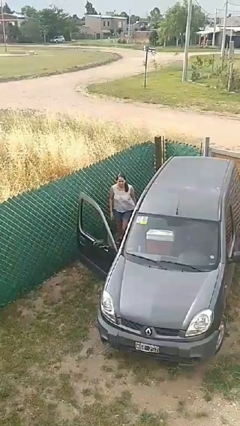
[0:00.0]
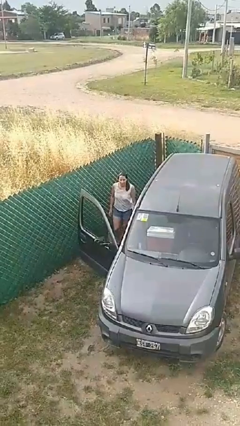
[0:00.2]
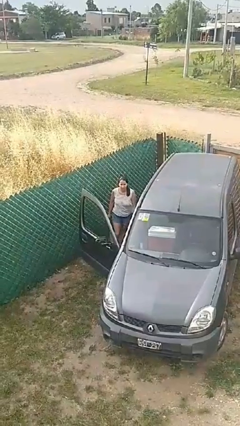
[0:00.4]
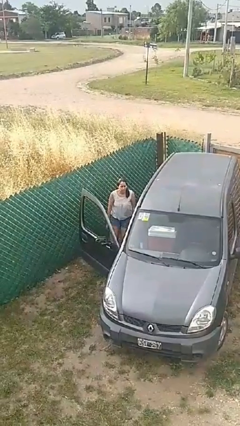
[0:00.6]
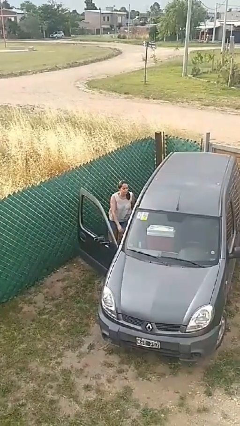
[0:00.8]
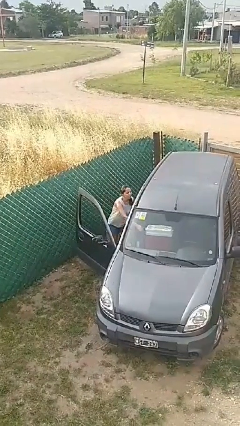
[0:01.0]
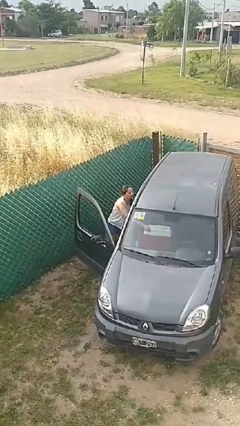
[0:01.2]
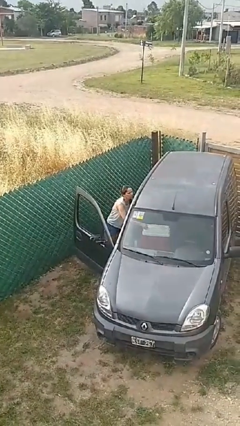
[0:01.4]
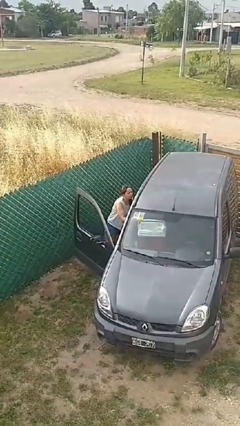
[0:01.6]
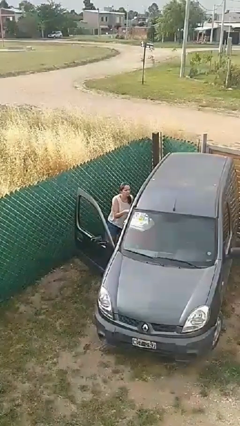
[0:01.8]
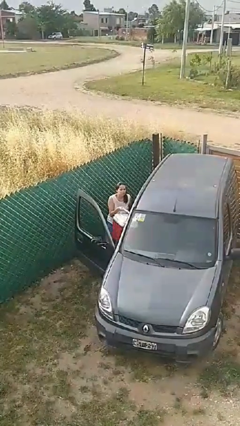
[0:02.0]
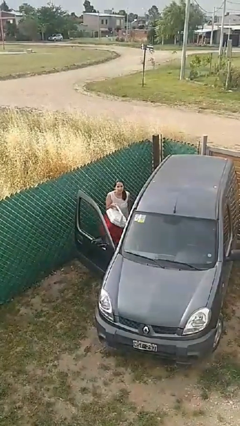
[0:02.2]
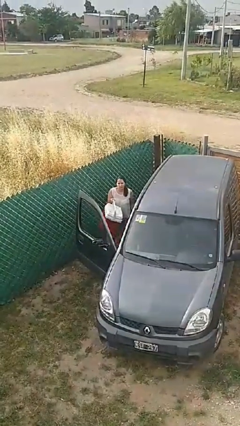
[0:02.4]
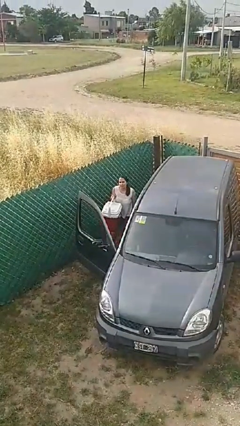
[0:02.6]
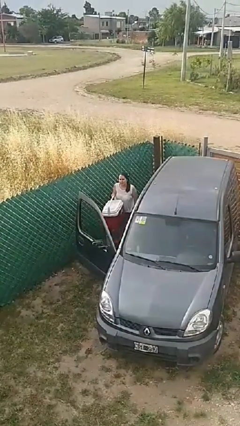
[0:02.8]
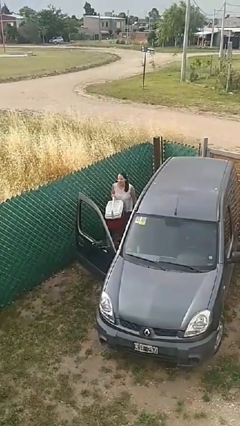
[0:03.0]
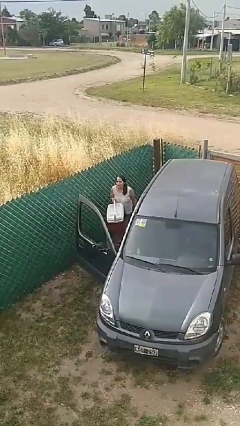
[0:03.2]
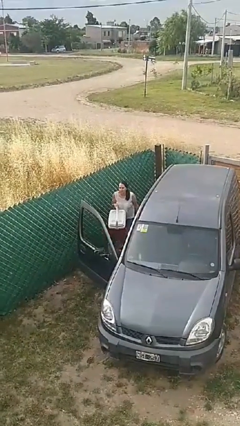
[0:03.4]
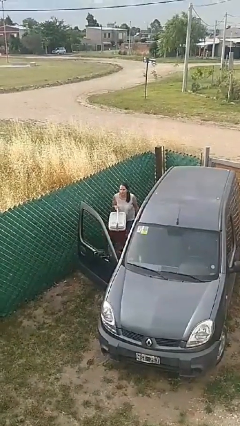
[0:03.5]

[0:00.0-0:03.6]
person unloads car

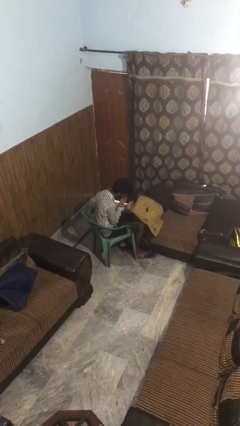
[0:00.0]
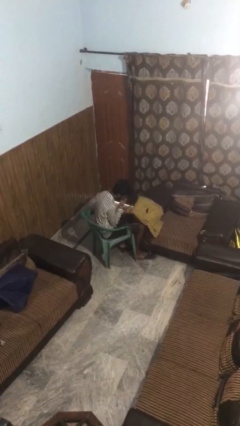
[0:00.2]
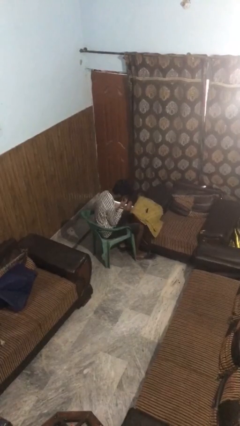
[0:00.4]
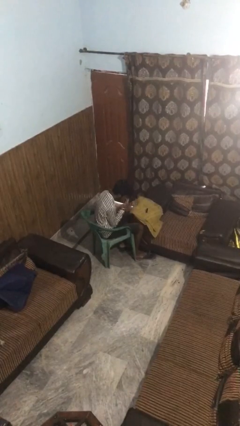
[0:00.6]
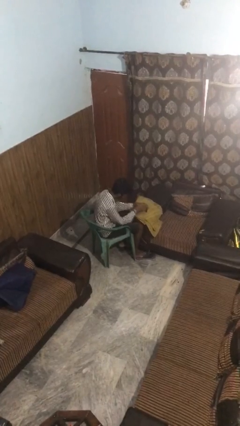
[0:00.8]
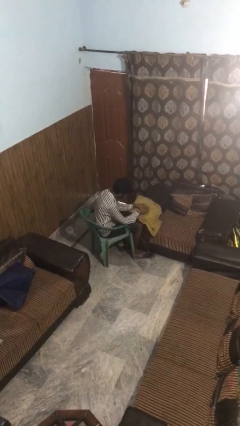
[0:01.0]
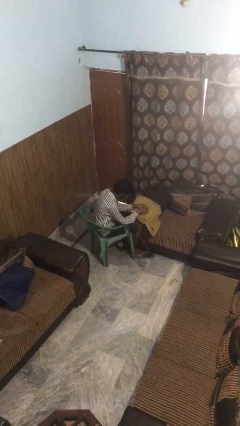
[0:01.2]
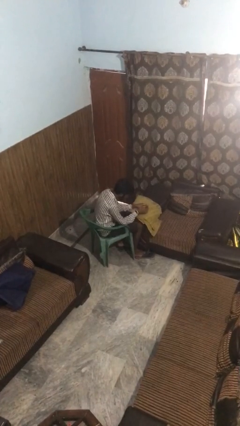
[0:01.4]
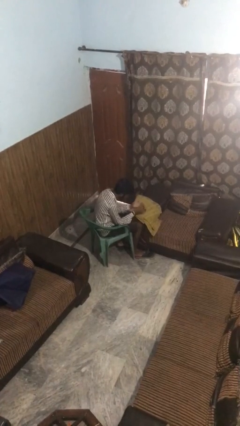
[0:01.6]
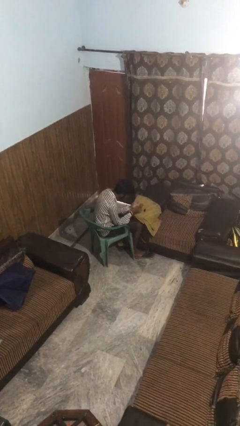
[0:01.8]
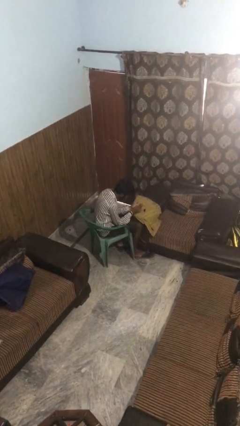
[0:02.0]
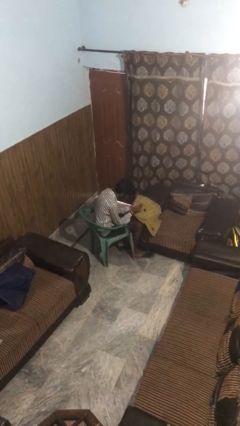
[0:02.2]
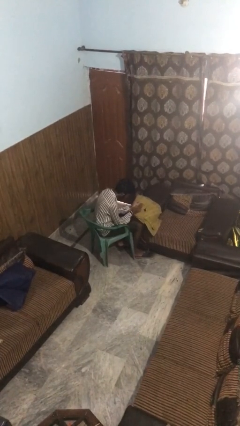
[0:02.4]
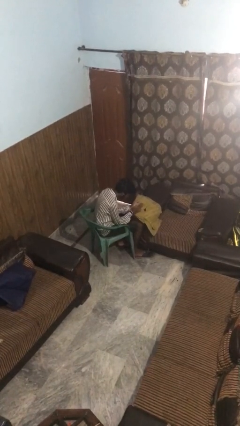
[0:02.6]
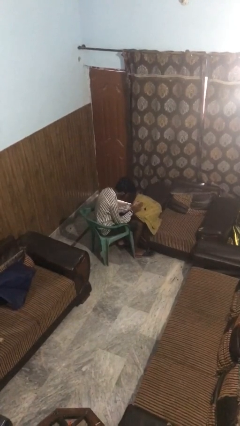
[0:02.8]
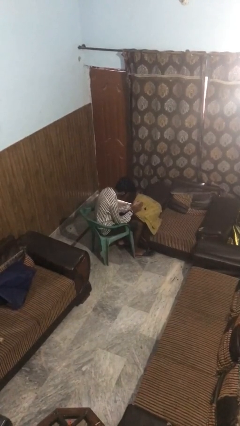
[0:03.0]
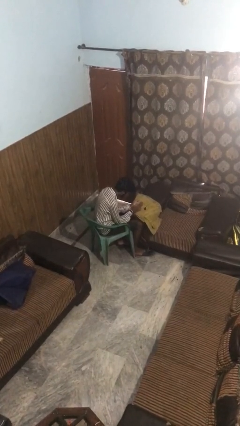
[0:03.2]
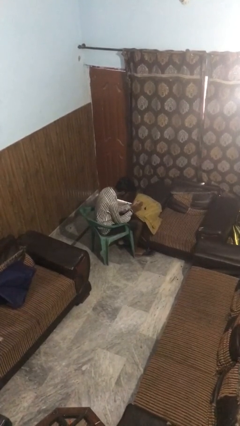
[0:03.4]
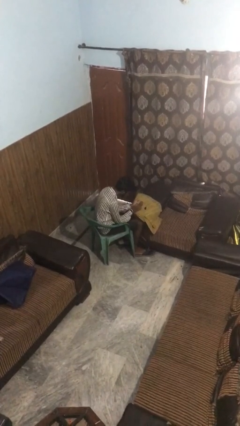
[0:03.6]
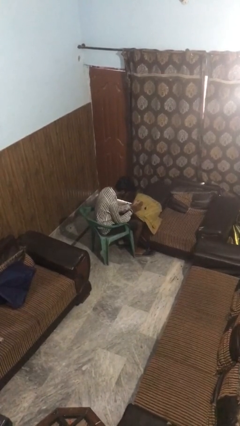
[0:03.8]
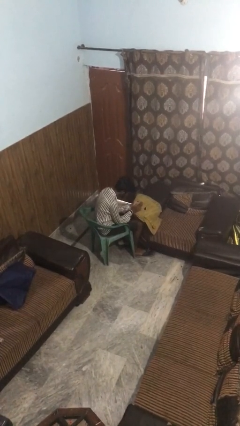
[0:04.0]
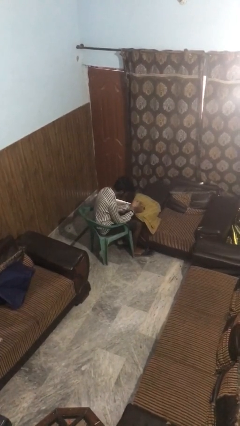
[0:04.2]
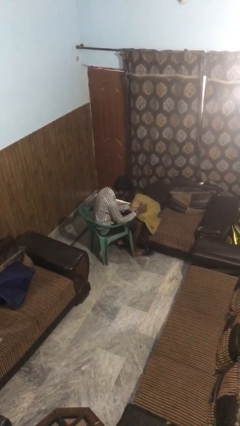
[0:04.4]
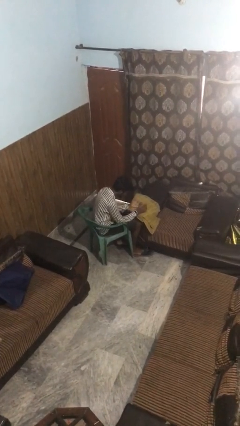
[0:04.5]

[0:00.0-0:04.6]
person paints fingernails

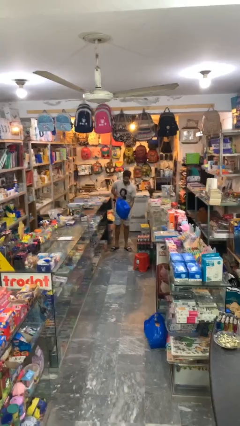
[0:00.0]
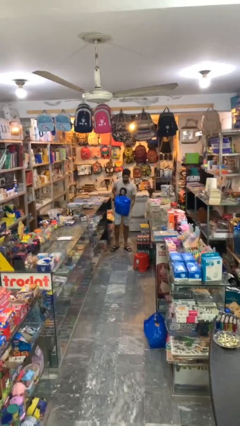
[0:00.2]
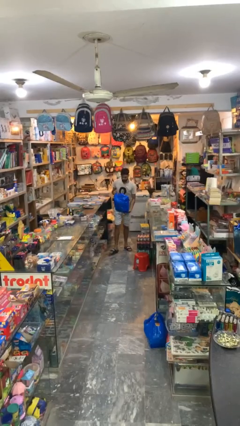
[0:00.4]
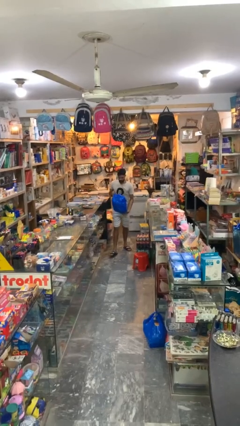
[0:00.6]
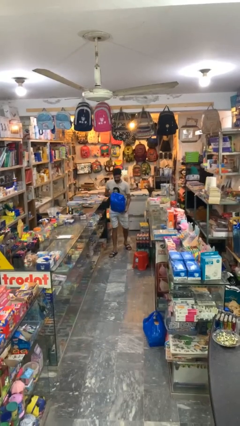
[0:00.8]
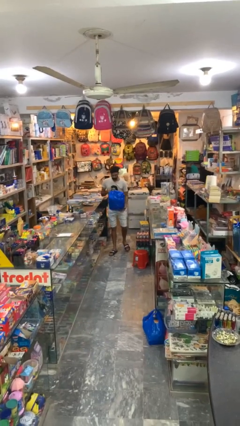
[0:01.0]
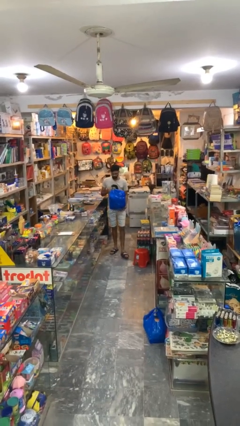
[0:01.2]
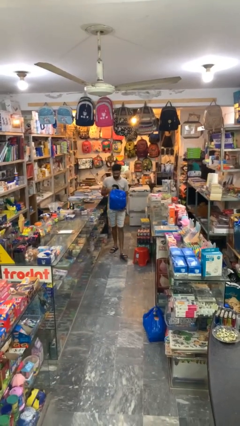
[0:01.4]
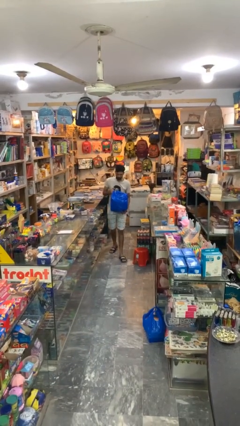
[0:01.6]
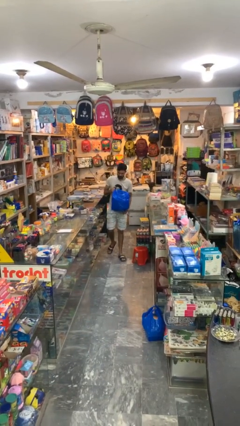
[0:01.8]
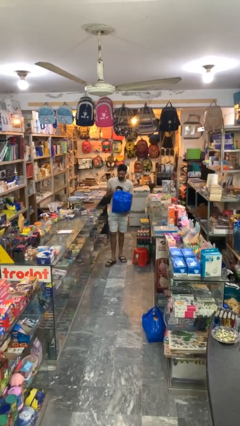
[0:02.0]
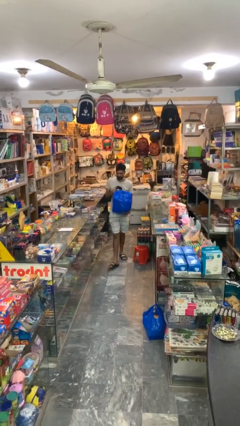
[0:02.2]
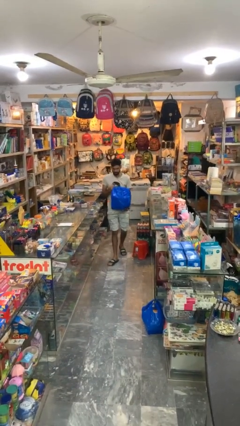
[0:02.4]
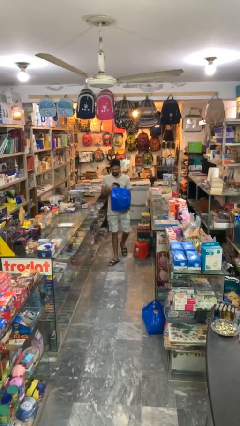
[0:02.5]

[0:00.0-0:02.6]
person carries heavy object

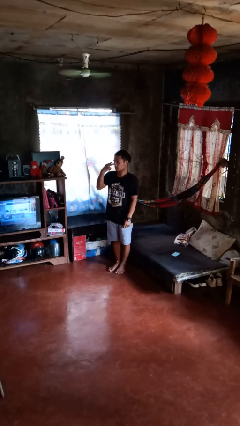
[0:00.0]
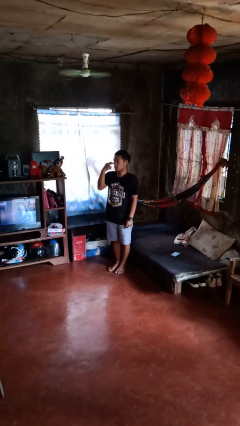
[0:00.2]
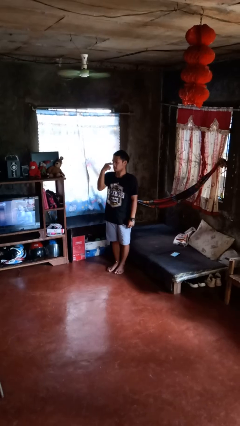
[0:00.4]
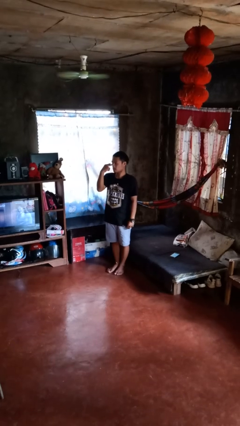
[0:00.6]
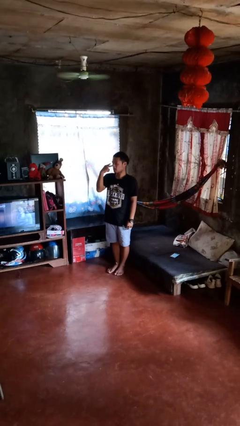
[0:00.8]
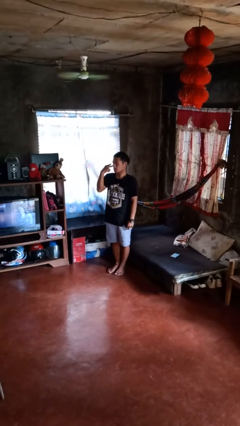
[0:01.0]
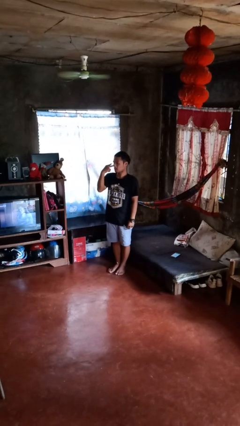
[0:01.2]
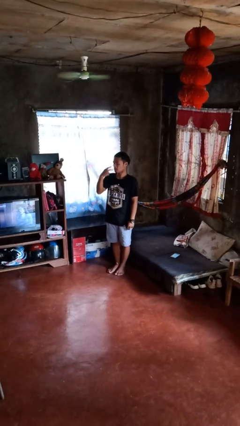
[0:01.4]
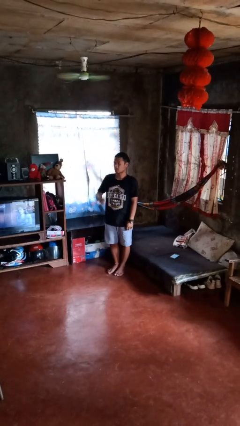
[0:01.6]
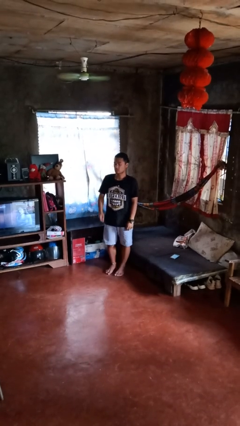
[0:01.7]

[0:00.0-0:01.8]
person gestures watch closely

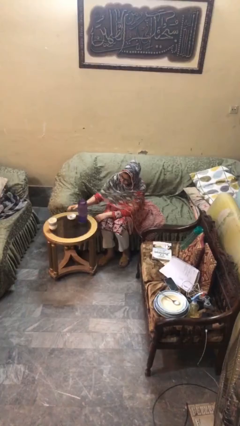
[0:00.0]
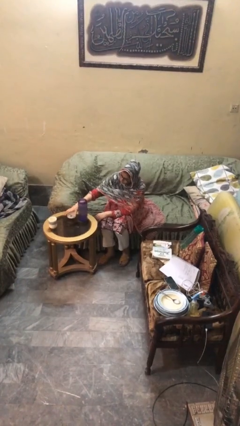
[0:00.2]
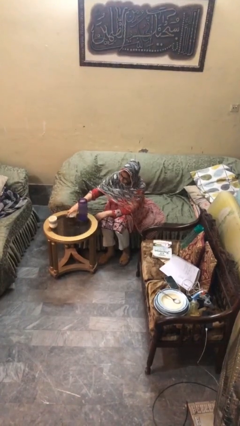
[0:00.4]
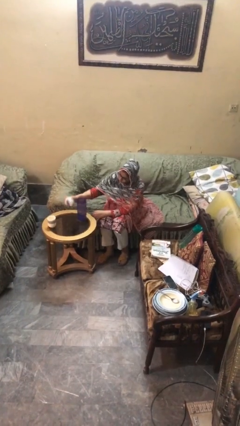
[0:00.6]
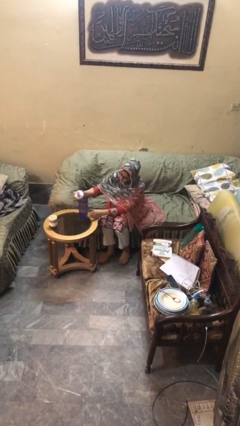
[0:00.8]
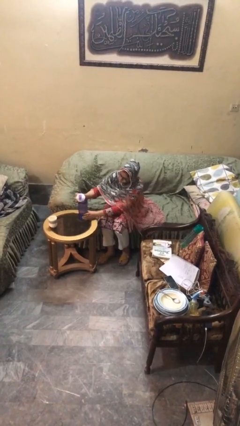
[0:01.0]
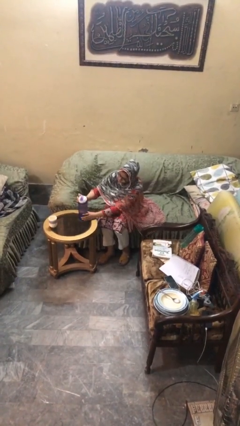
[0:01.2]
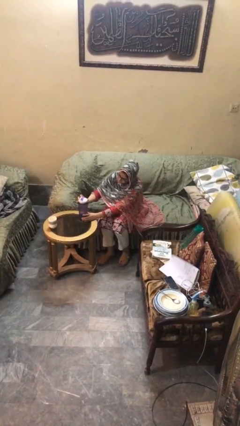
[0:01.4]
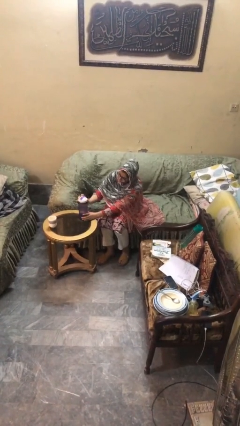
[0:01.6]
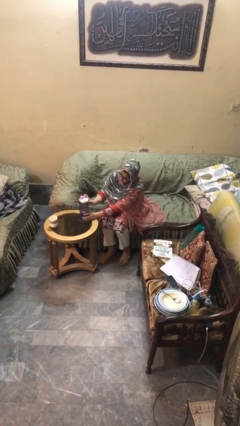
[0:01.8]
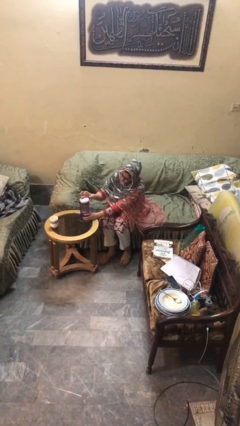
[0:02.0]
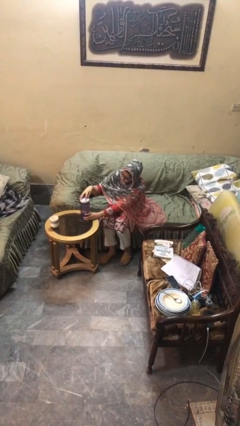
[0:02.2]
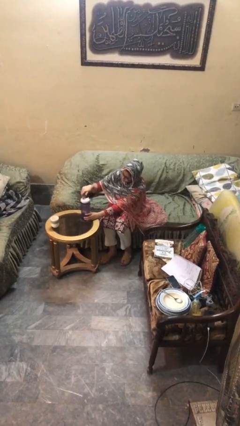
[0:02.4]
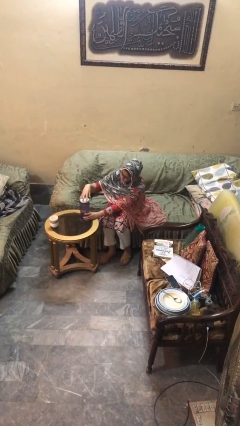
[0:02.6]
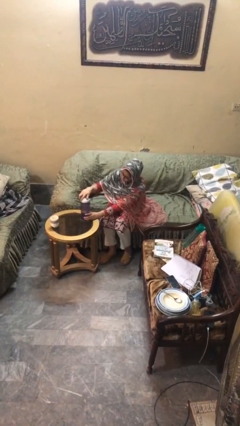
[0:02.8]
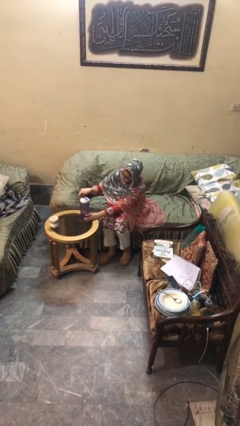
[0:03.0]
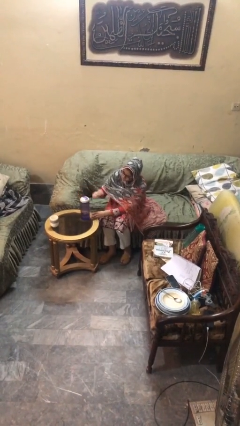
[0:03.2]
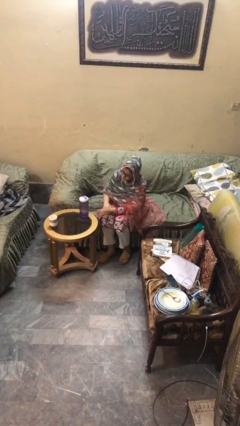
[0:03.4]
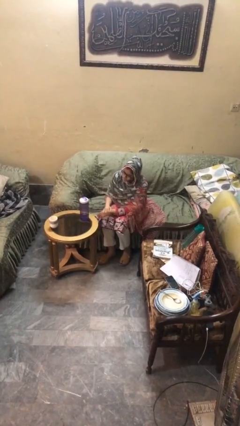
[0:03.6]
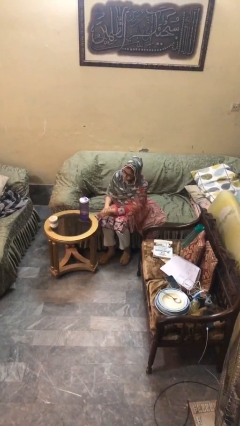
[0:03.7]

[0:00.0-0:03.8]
person screws lid to bottle

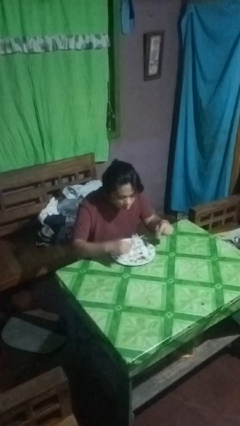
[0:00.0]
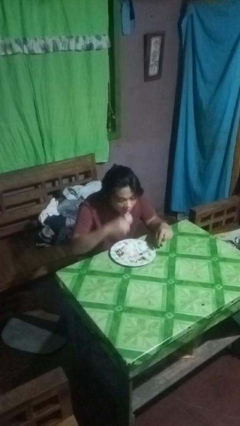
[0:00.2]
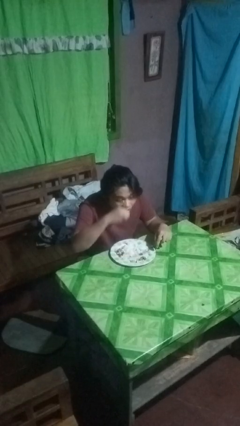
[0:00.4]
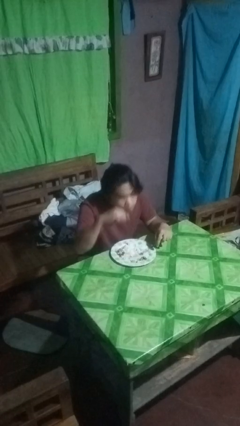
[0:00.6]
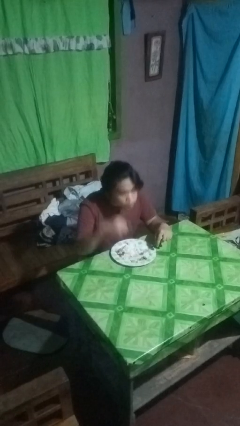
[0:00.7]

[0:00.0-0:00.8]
person eats with utensil

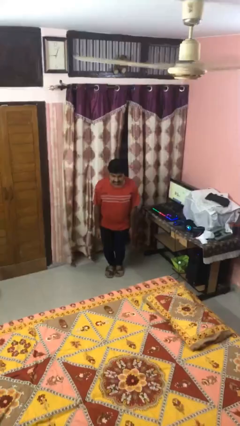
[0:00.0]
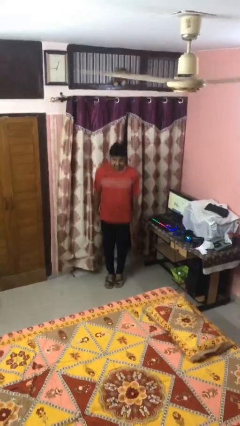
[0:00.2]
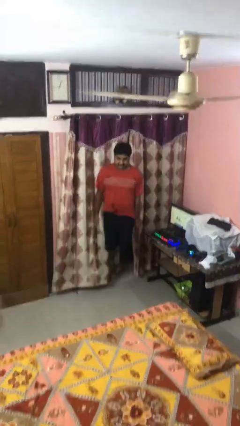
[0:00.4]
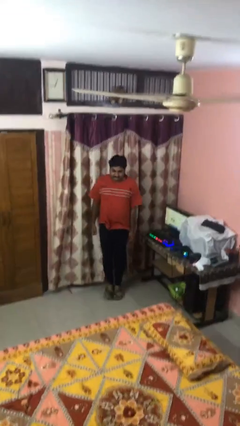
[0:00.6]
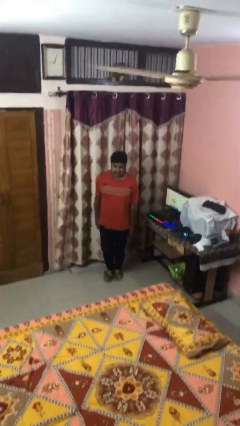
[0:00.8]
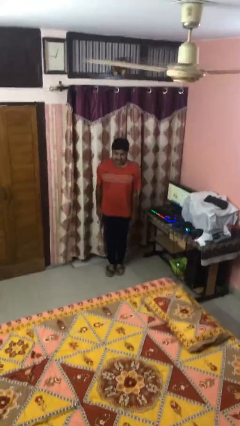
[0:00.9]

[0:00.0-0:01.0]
person jumps
